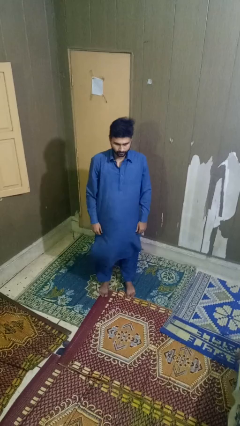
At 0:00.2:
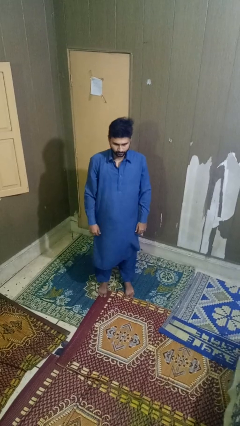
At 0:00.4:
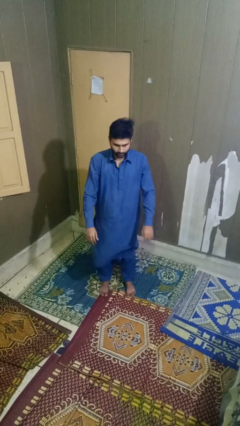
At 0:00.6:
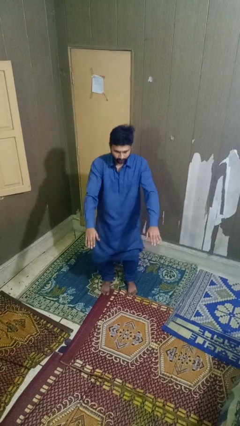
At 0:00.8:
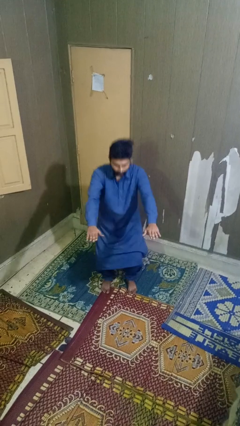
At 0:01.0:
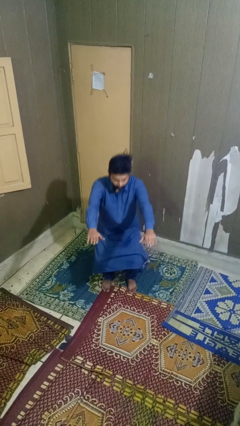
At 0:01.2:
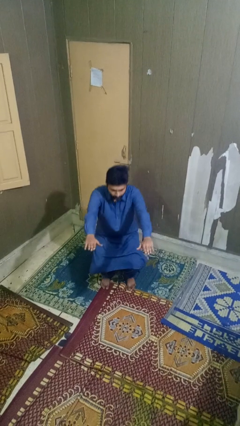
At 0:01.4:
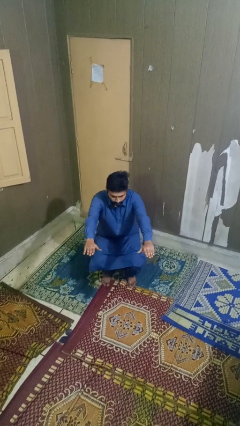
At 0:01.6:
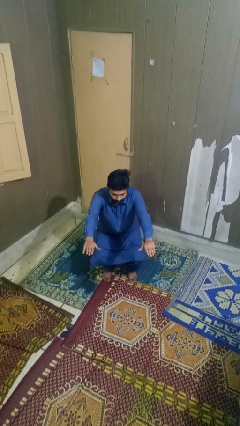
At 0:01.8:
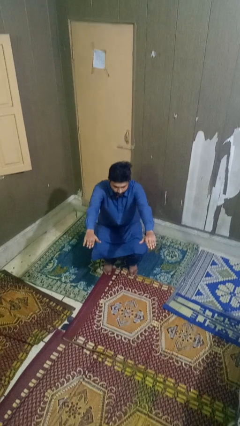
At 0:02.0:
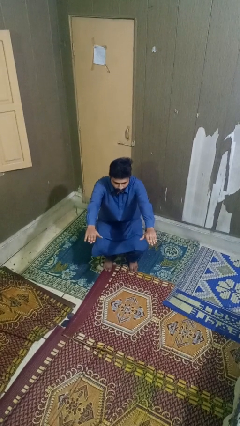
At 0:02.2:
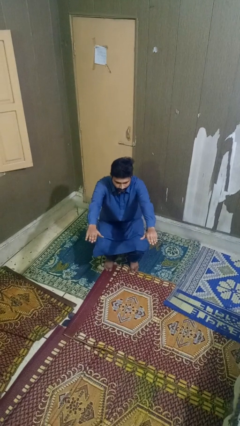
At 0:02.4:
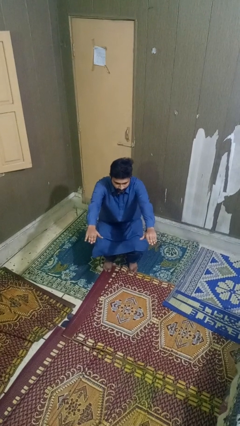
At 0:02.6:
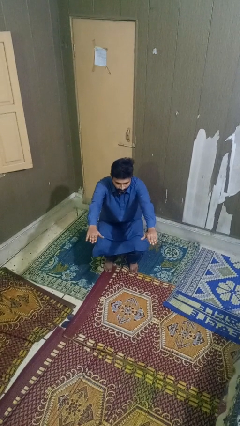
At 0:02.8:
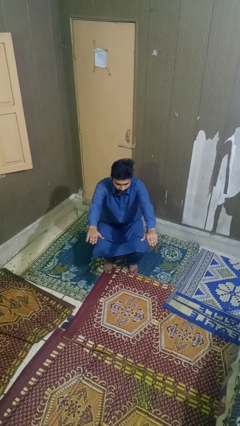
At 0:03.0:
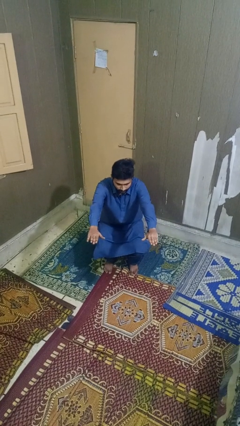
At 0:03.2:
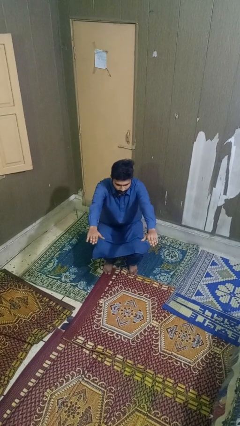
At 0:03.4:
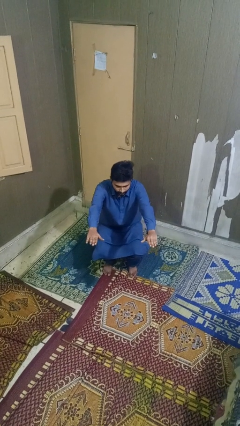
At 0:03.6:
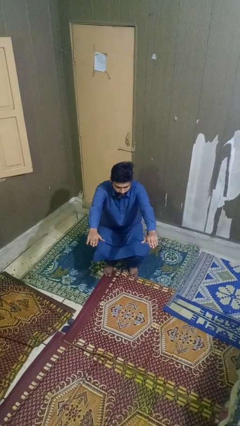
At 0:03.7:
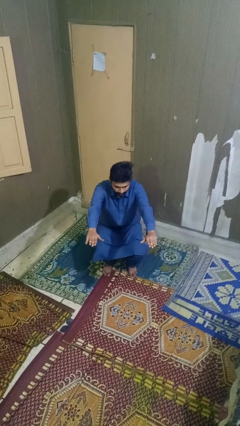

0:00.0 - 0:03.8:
person squats

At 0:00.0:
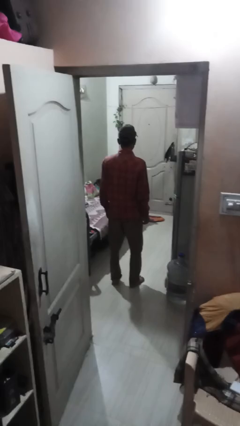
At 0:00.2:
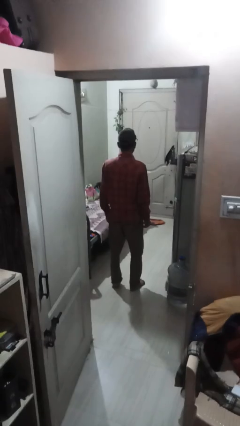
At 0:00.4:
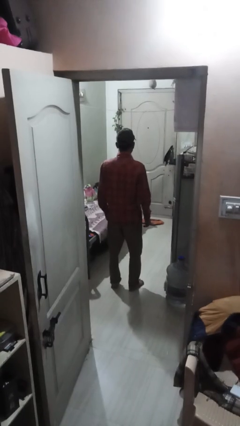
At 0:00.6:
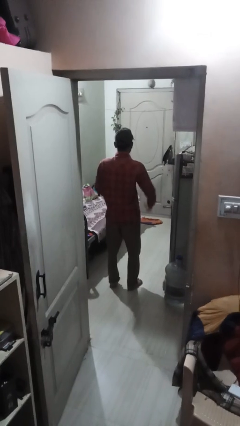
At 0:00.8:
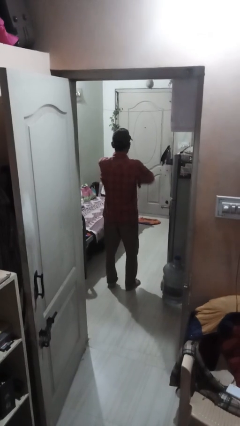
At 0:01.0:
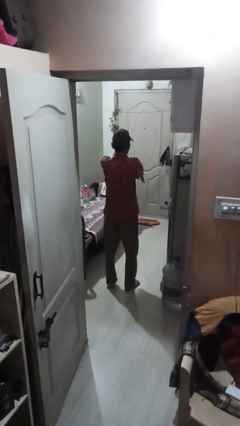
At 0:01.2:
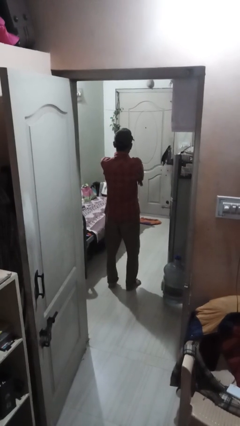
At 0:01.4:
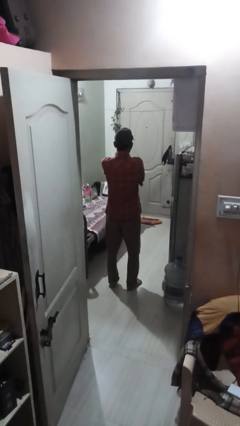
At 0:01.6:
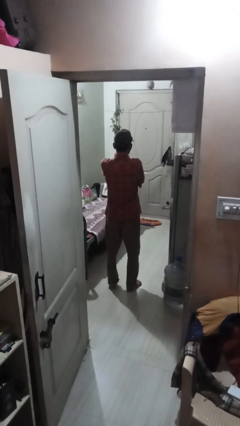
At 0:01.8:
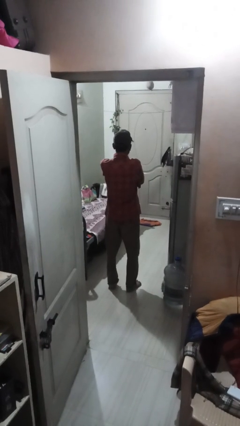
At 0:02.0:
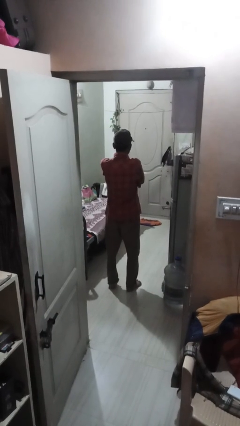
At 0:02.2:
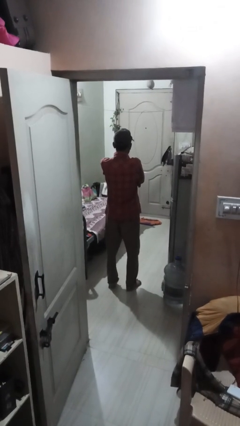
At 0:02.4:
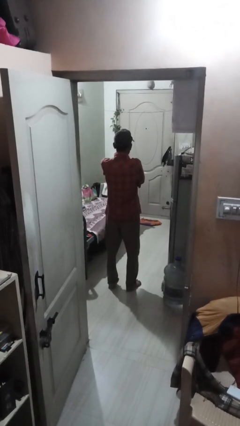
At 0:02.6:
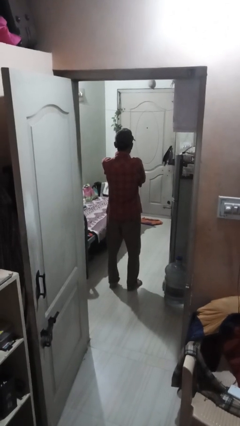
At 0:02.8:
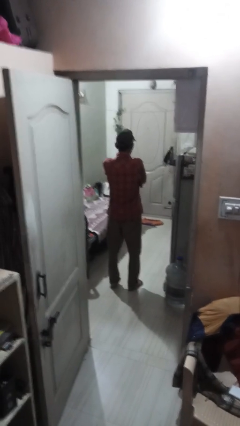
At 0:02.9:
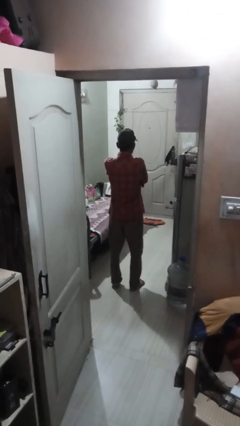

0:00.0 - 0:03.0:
person crosses arms

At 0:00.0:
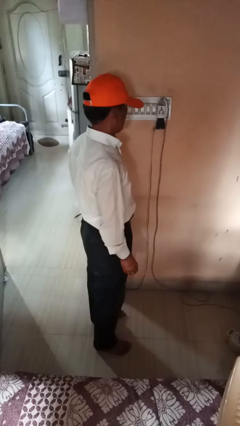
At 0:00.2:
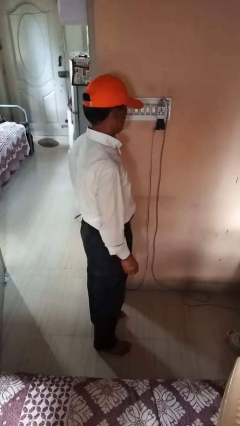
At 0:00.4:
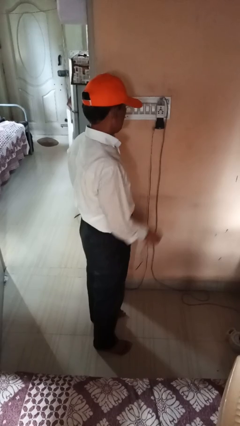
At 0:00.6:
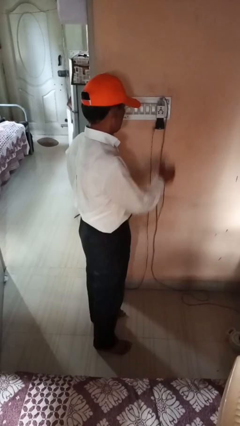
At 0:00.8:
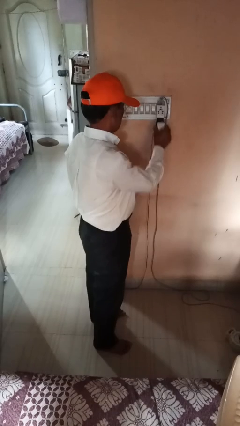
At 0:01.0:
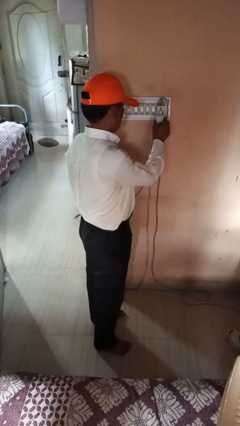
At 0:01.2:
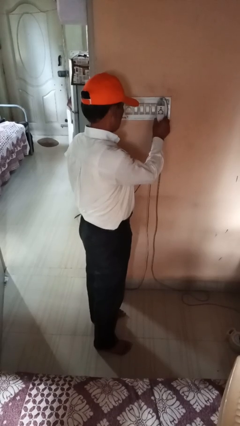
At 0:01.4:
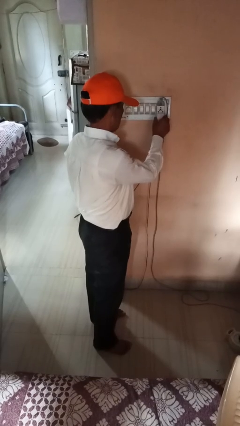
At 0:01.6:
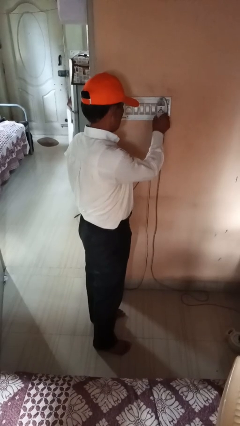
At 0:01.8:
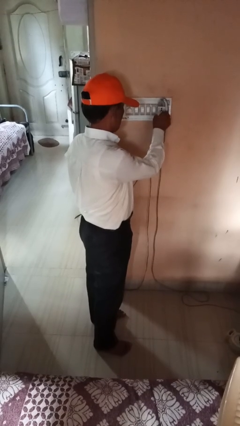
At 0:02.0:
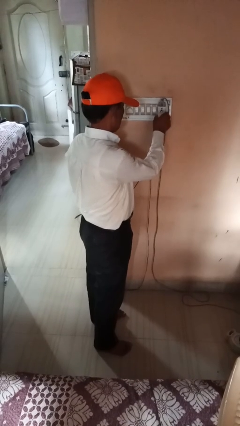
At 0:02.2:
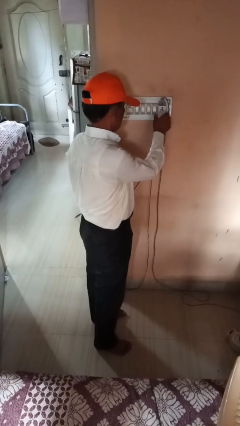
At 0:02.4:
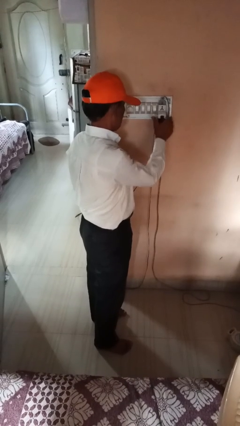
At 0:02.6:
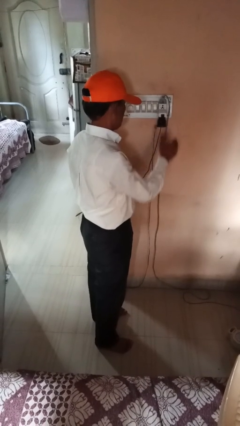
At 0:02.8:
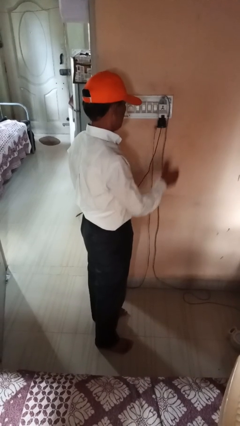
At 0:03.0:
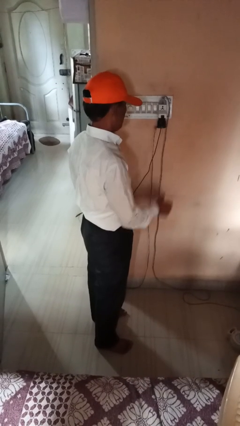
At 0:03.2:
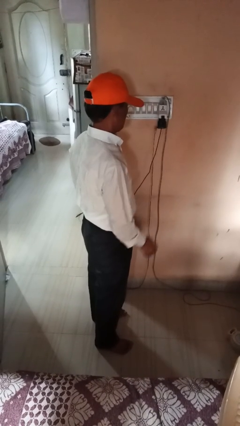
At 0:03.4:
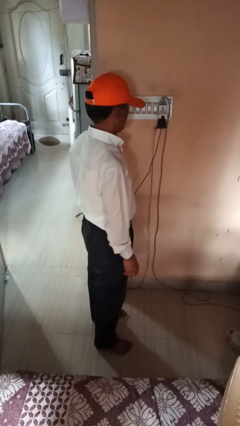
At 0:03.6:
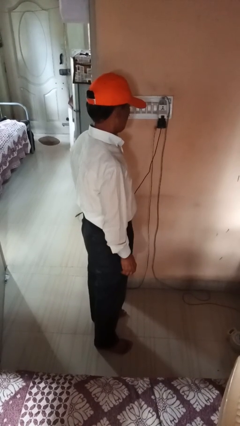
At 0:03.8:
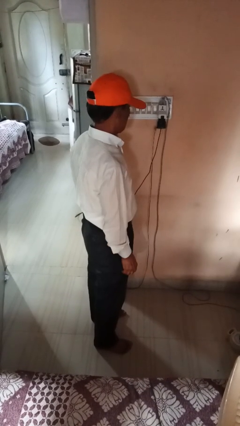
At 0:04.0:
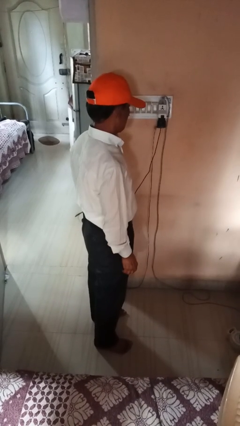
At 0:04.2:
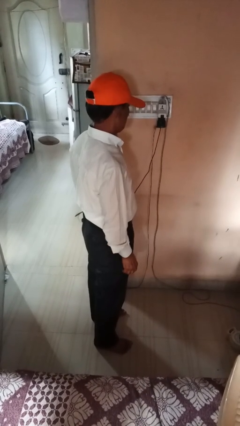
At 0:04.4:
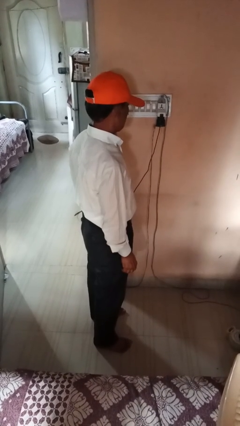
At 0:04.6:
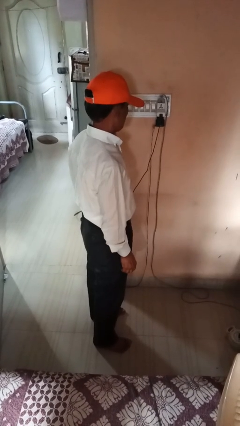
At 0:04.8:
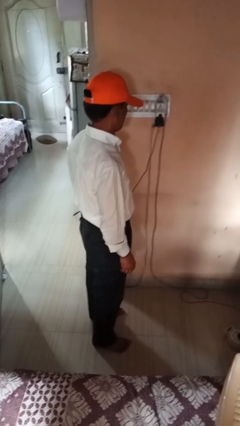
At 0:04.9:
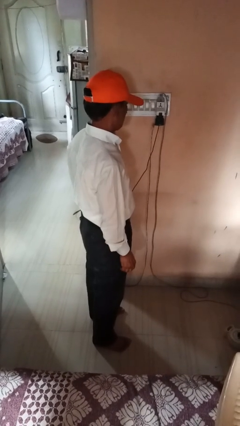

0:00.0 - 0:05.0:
person plugs into electrical socket

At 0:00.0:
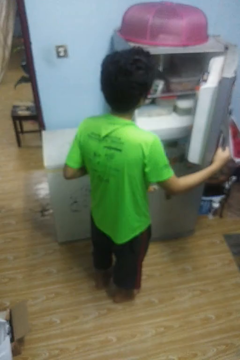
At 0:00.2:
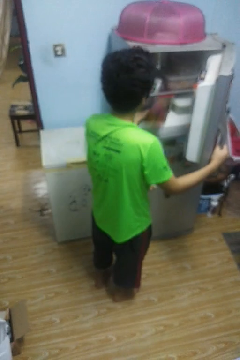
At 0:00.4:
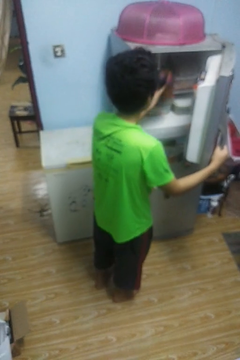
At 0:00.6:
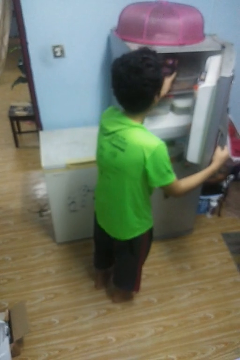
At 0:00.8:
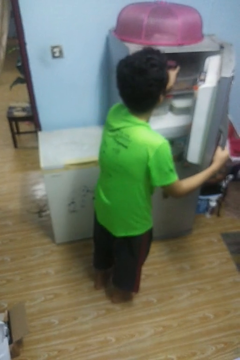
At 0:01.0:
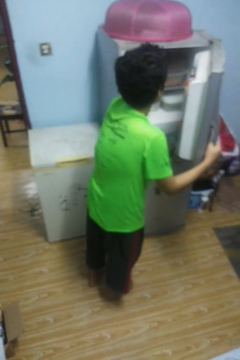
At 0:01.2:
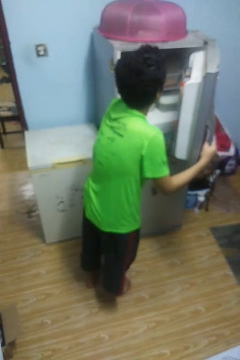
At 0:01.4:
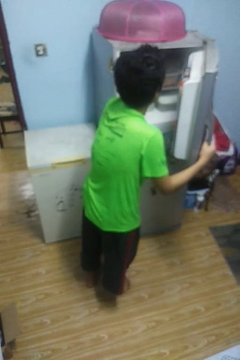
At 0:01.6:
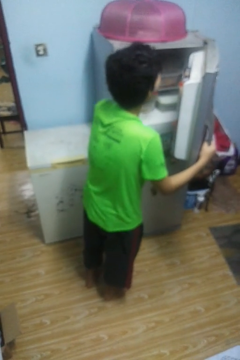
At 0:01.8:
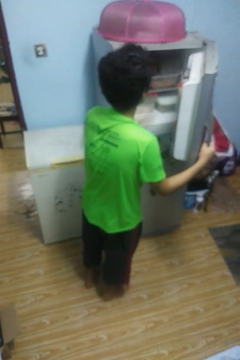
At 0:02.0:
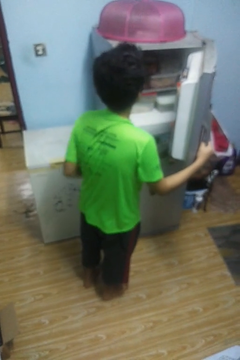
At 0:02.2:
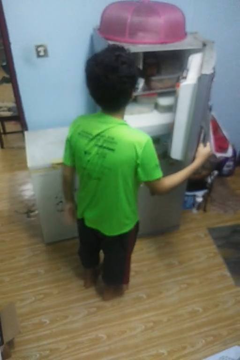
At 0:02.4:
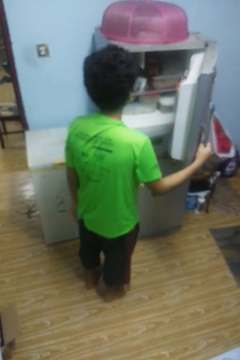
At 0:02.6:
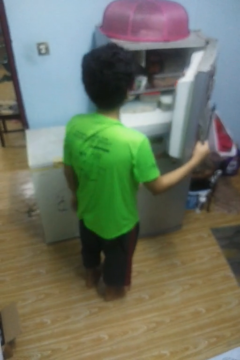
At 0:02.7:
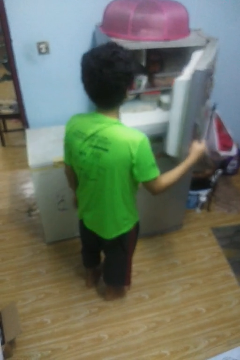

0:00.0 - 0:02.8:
person puts object into refrigerator

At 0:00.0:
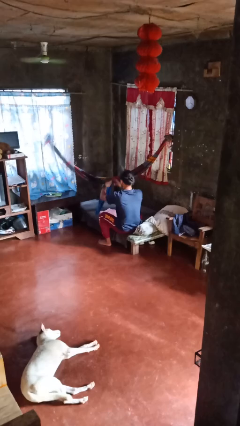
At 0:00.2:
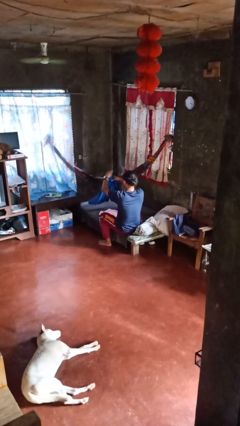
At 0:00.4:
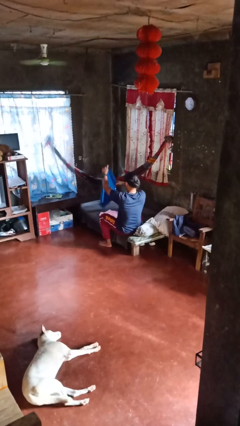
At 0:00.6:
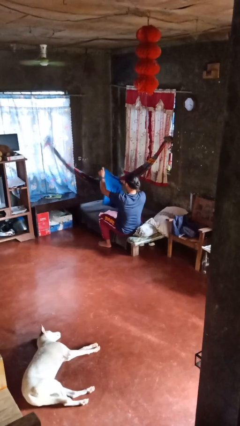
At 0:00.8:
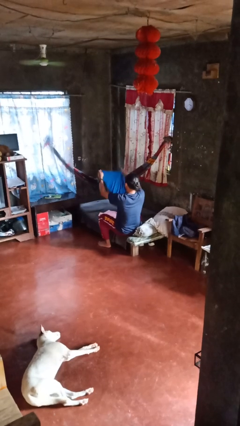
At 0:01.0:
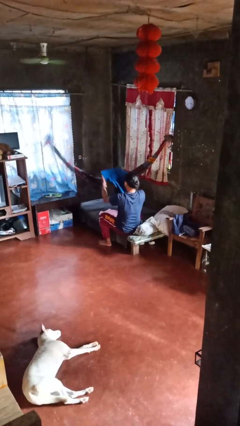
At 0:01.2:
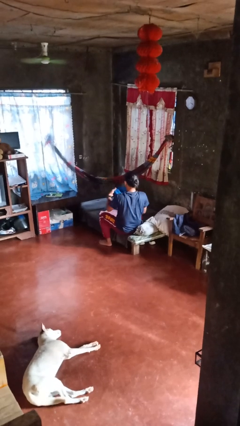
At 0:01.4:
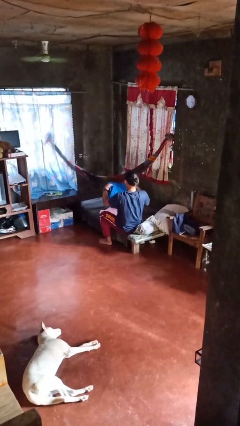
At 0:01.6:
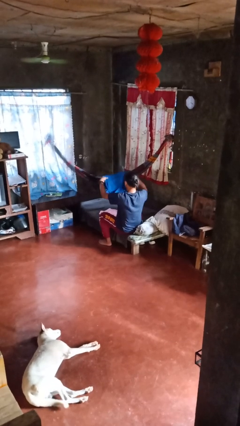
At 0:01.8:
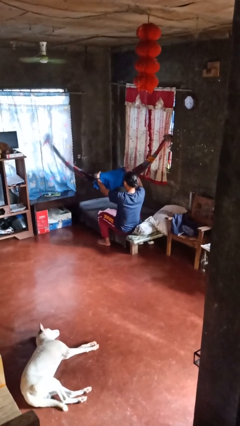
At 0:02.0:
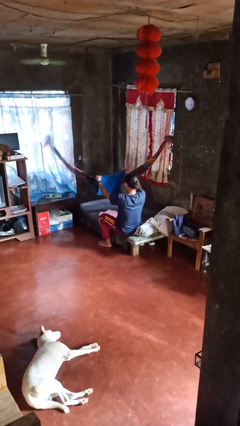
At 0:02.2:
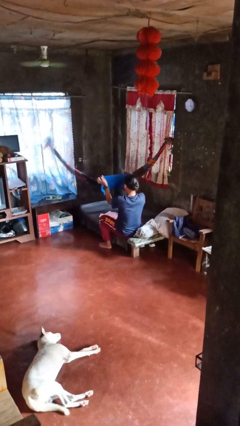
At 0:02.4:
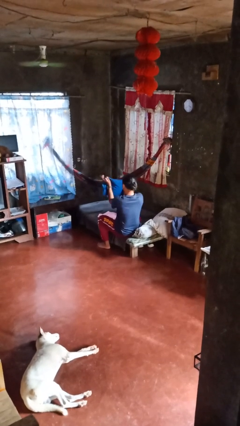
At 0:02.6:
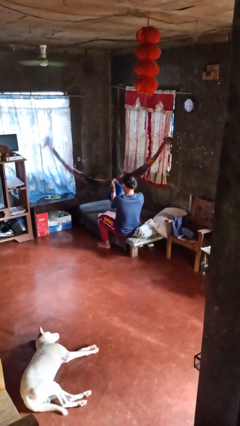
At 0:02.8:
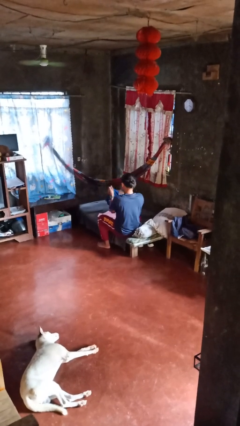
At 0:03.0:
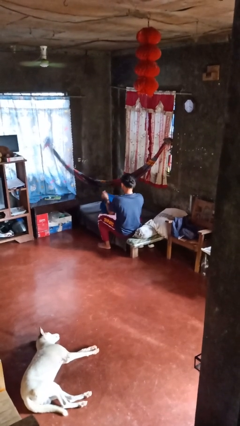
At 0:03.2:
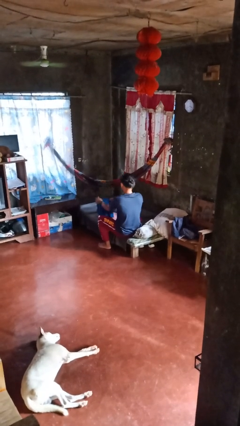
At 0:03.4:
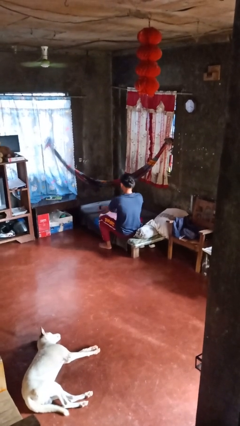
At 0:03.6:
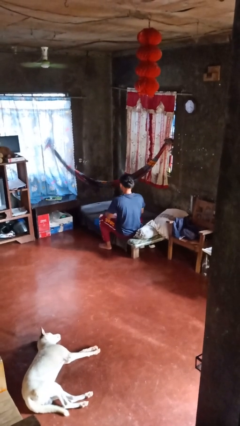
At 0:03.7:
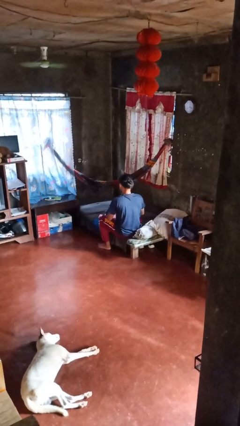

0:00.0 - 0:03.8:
person folds shirt
